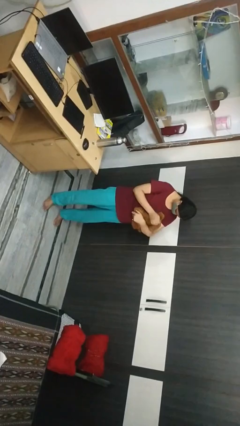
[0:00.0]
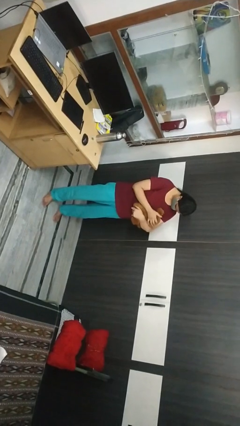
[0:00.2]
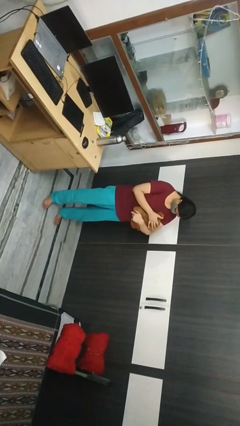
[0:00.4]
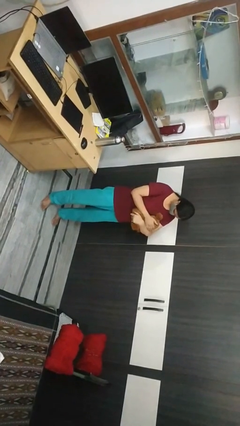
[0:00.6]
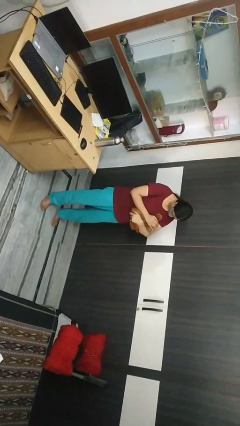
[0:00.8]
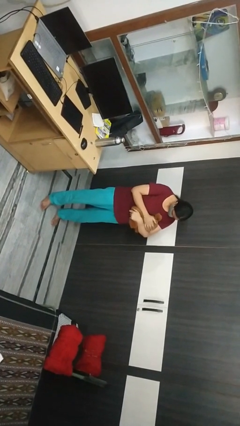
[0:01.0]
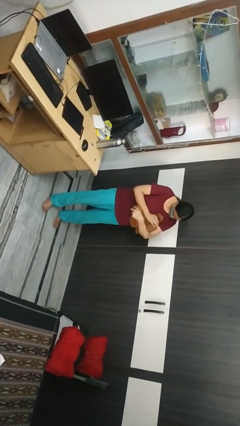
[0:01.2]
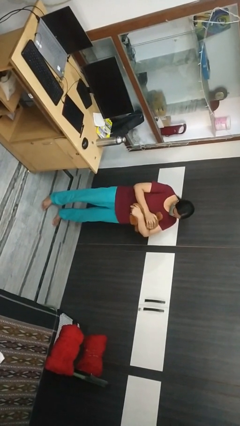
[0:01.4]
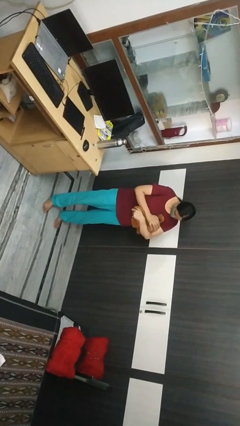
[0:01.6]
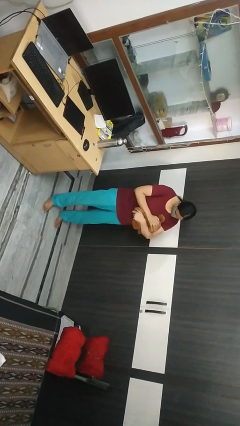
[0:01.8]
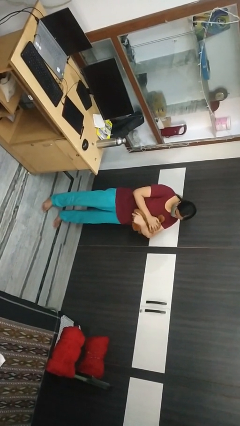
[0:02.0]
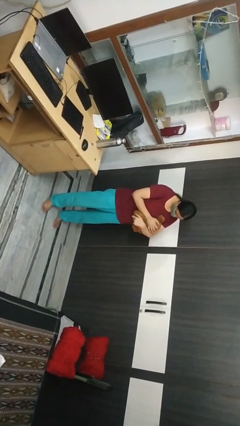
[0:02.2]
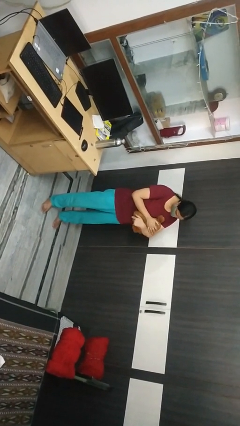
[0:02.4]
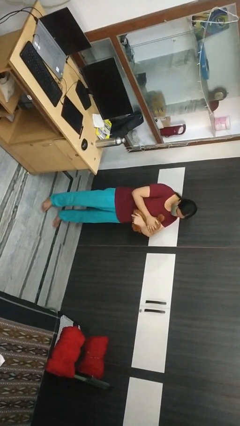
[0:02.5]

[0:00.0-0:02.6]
person pets cat

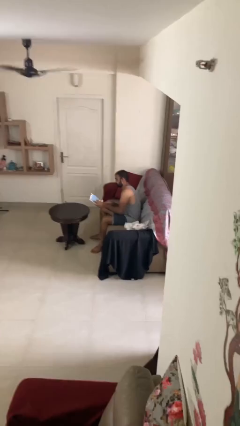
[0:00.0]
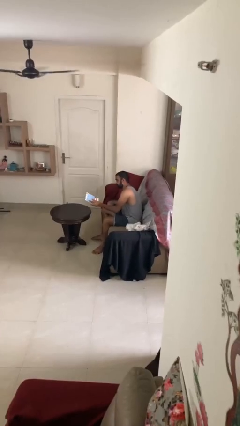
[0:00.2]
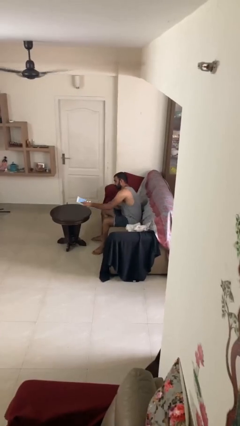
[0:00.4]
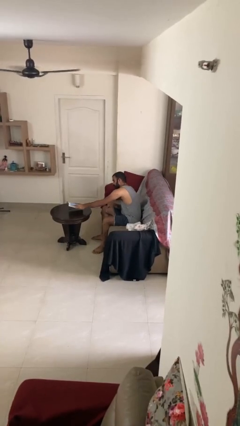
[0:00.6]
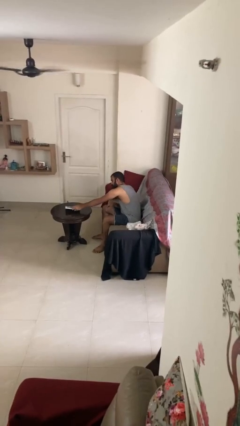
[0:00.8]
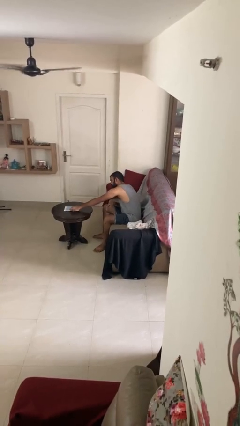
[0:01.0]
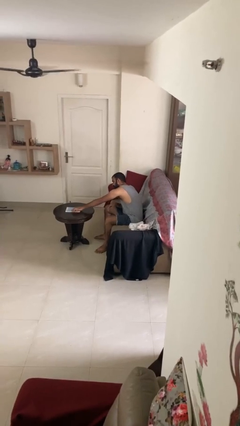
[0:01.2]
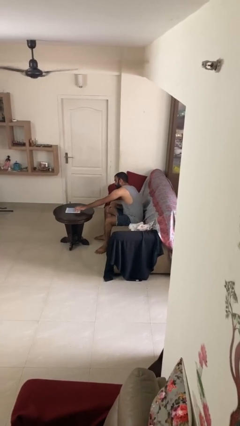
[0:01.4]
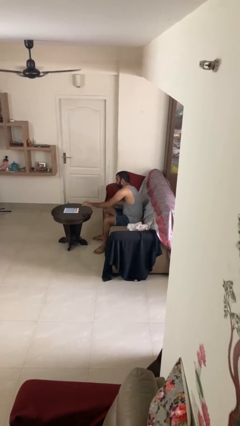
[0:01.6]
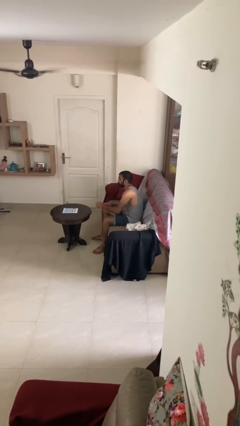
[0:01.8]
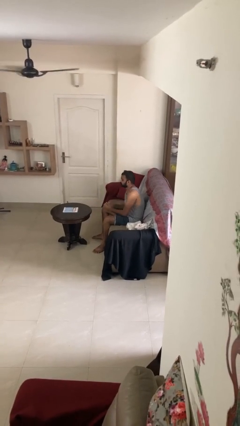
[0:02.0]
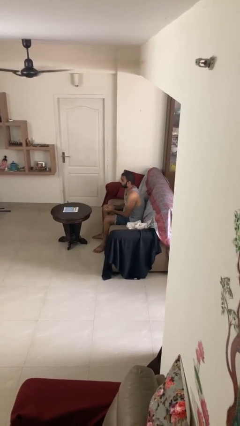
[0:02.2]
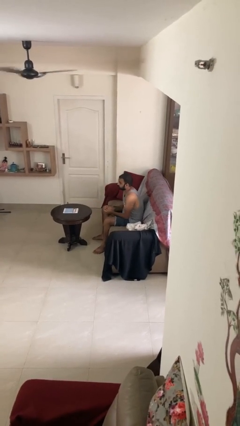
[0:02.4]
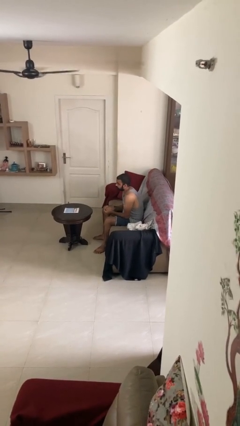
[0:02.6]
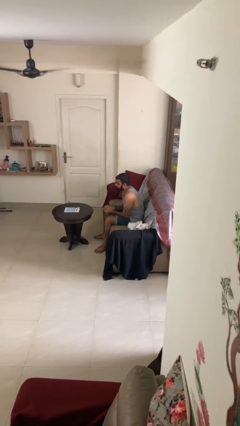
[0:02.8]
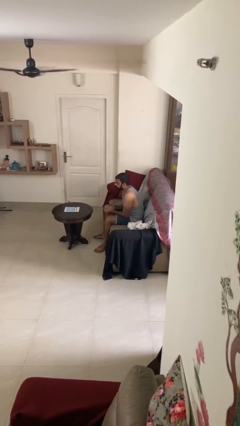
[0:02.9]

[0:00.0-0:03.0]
person puts down object on table

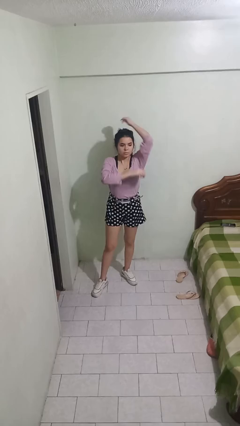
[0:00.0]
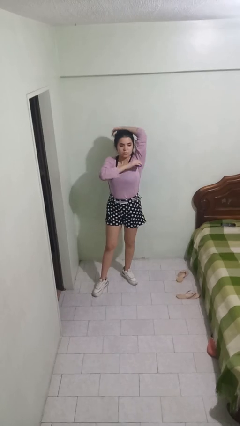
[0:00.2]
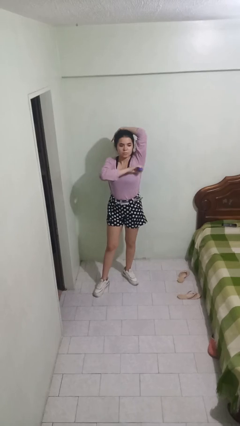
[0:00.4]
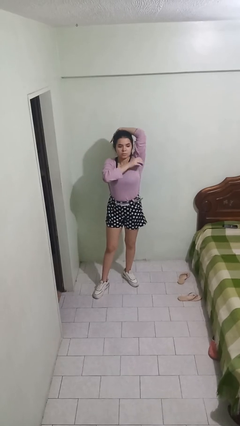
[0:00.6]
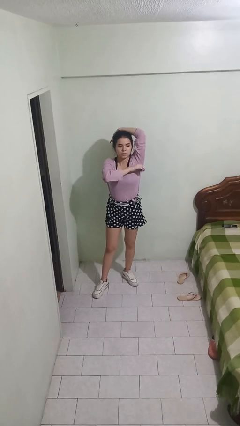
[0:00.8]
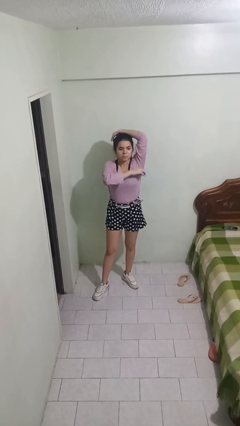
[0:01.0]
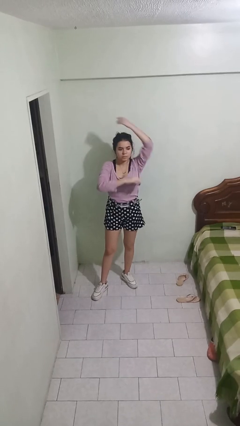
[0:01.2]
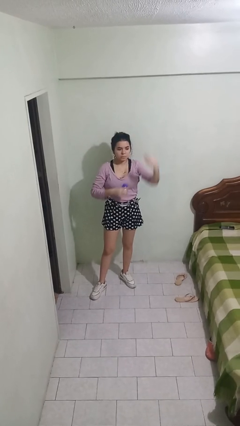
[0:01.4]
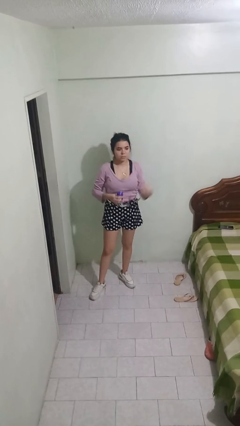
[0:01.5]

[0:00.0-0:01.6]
person applies deodorant

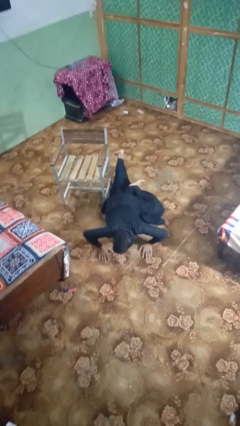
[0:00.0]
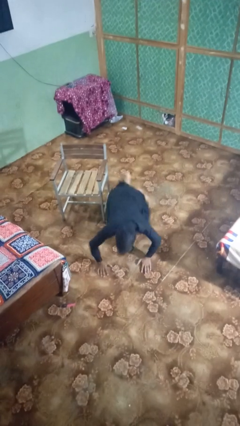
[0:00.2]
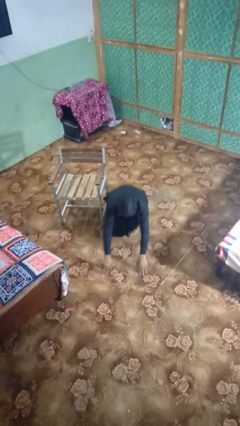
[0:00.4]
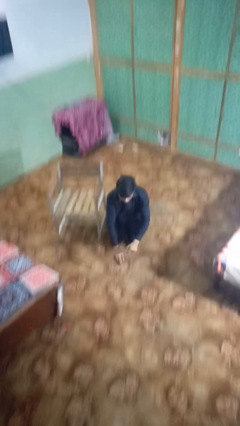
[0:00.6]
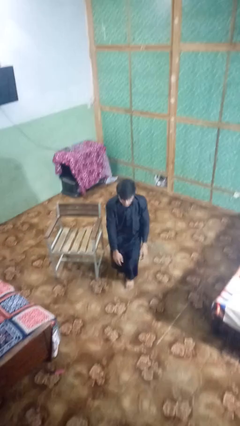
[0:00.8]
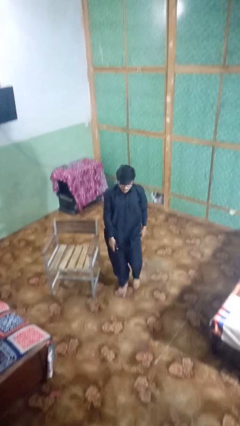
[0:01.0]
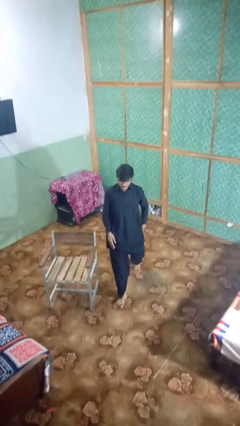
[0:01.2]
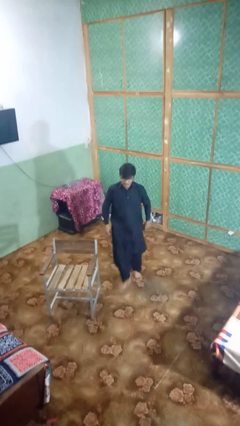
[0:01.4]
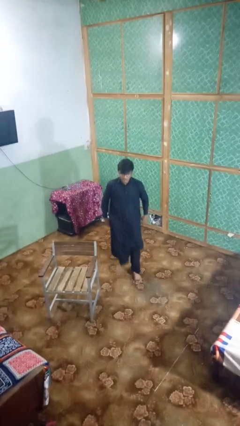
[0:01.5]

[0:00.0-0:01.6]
person stands up from floor

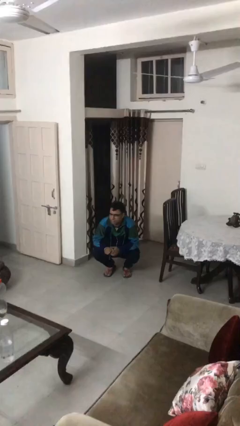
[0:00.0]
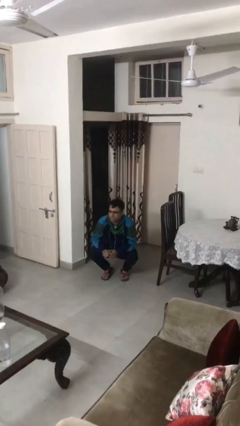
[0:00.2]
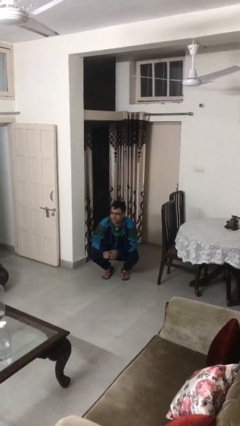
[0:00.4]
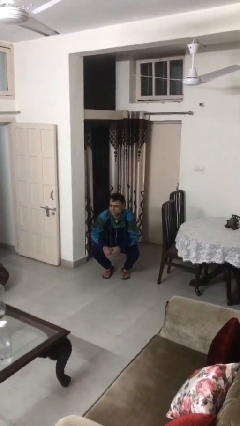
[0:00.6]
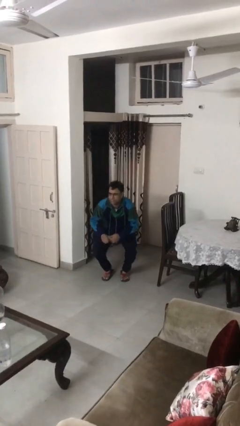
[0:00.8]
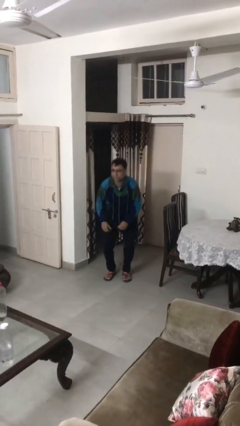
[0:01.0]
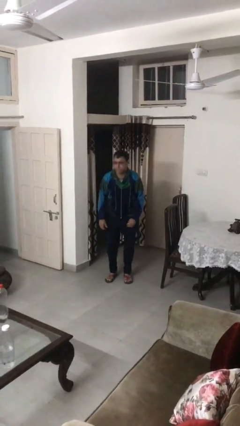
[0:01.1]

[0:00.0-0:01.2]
person stands up

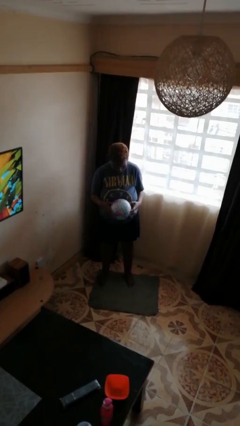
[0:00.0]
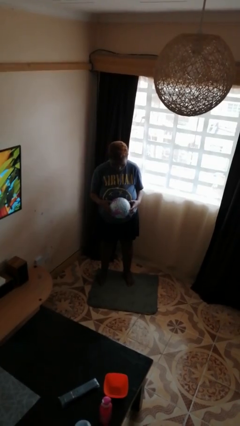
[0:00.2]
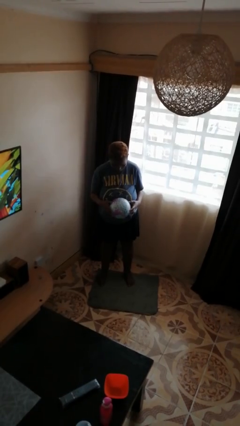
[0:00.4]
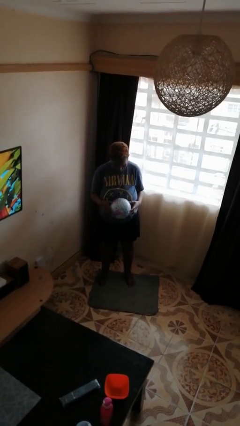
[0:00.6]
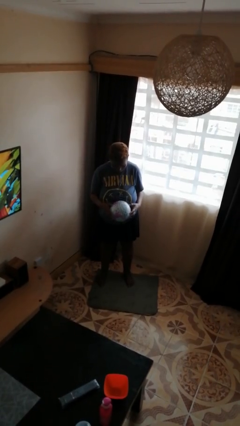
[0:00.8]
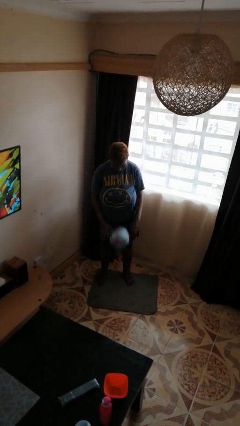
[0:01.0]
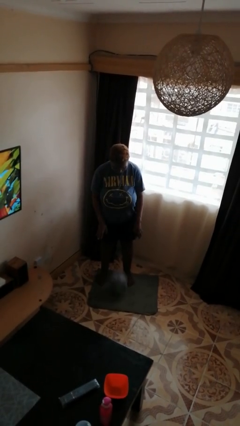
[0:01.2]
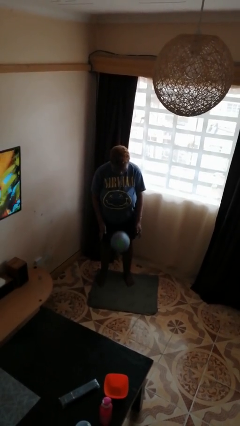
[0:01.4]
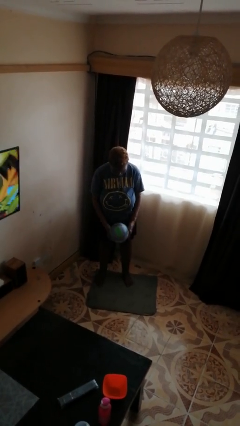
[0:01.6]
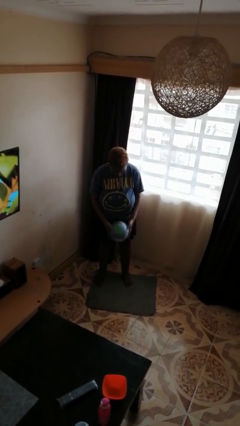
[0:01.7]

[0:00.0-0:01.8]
person bounces ball on floor

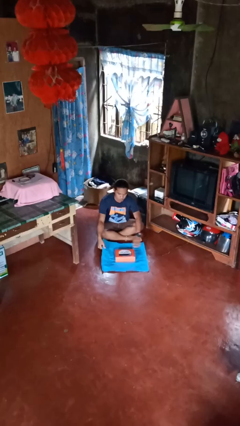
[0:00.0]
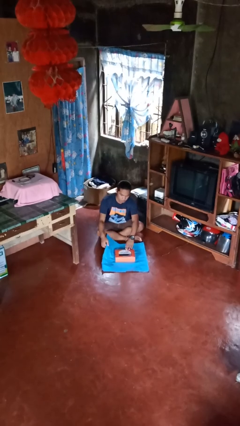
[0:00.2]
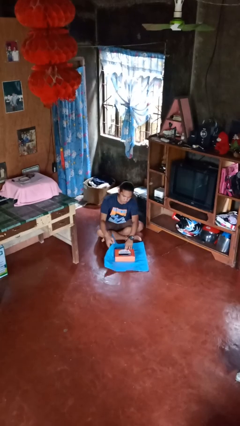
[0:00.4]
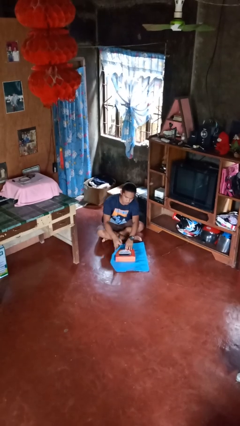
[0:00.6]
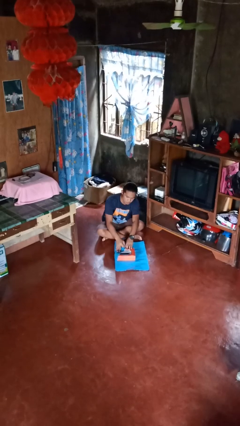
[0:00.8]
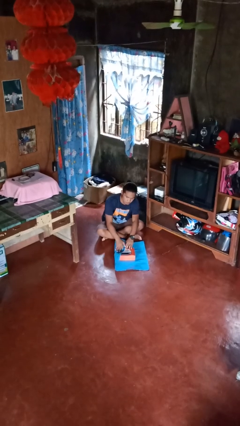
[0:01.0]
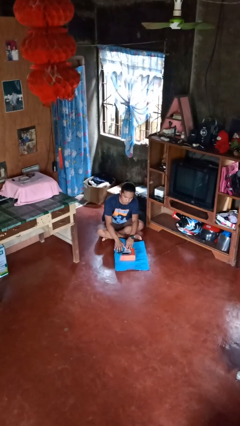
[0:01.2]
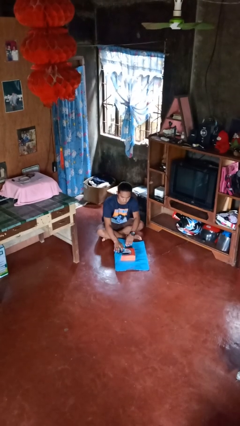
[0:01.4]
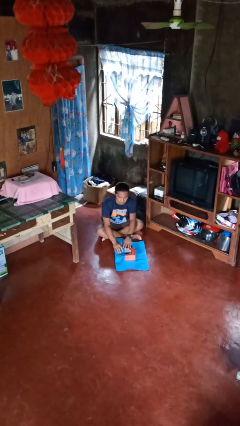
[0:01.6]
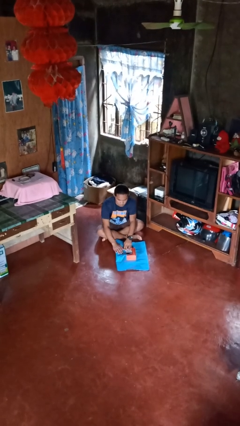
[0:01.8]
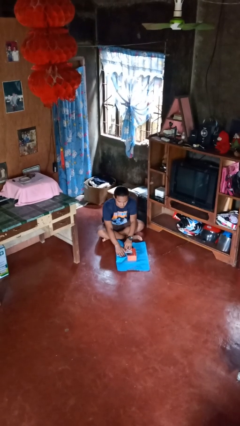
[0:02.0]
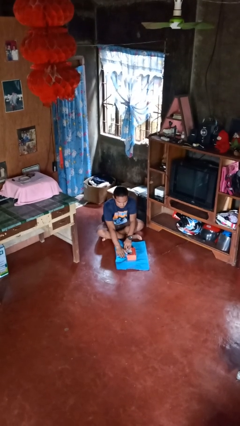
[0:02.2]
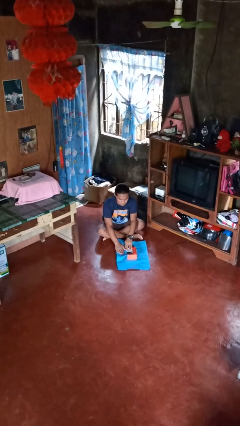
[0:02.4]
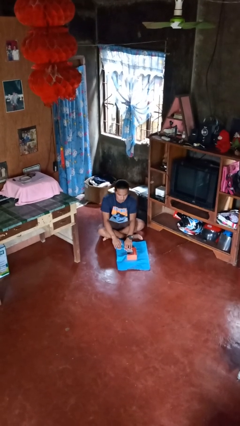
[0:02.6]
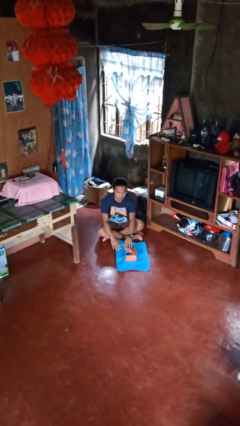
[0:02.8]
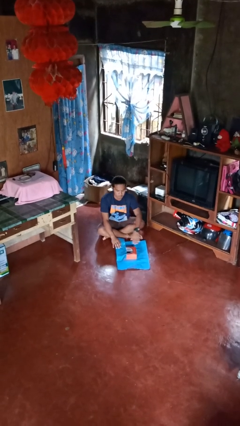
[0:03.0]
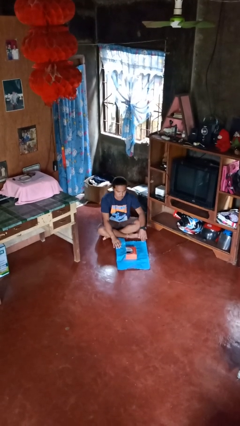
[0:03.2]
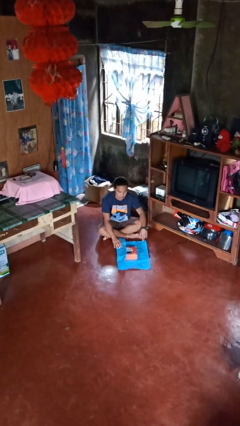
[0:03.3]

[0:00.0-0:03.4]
person wraps box

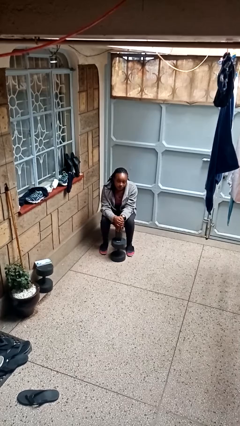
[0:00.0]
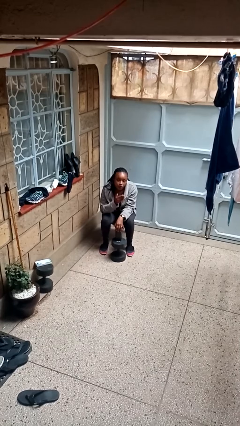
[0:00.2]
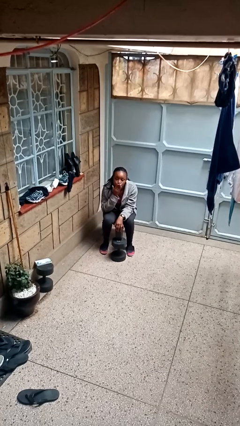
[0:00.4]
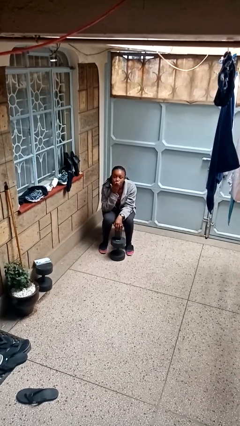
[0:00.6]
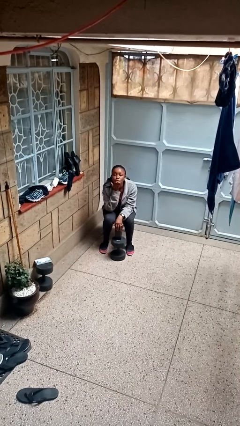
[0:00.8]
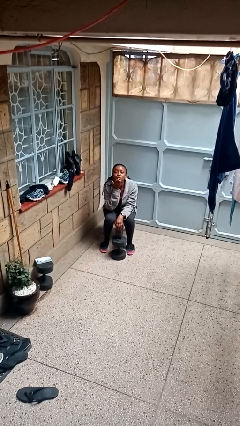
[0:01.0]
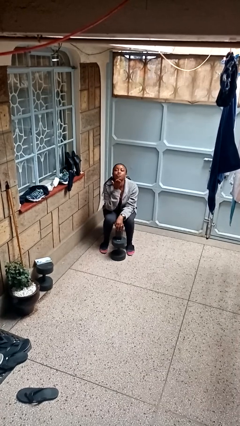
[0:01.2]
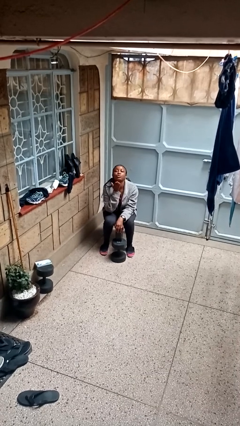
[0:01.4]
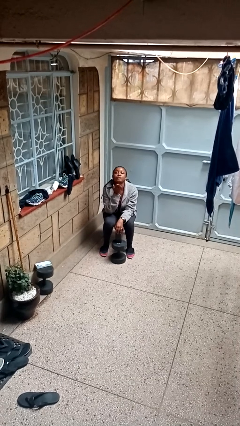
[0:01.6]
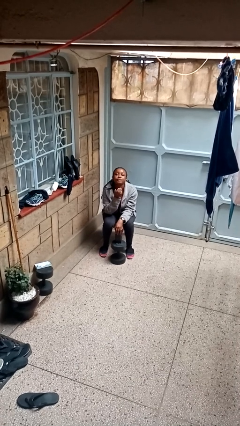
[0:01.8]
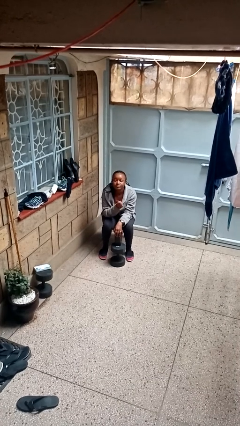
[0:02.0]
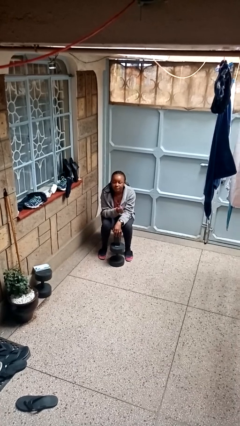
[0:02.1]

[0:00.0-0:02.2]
person gestures blow kiss

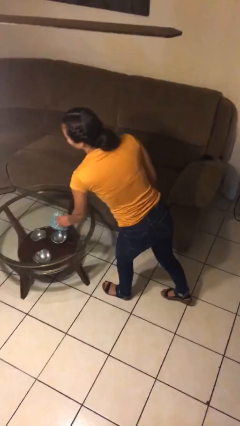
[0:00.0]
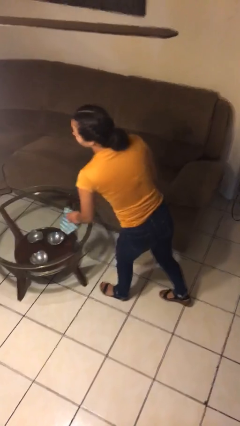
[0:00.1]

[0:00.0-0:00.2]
person picks up object from table
